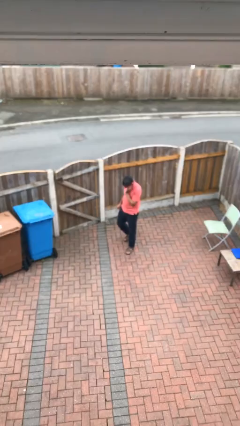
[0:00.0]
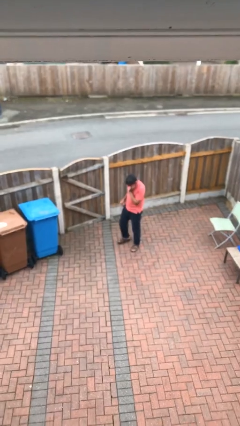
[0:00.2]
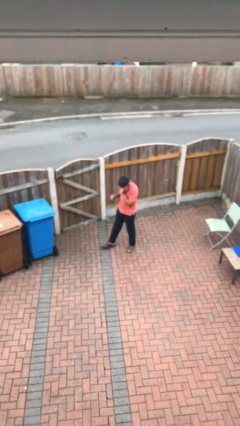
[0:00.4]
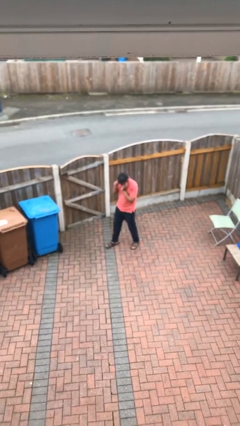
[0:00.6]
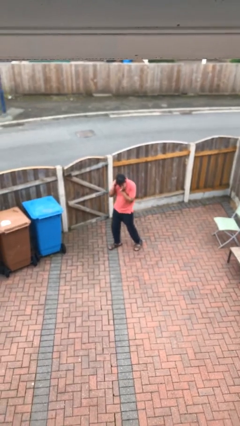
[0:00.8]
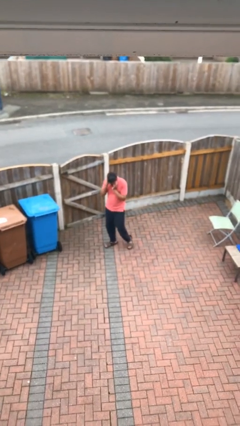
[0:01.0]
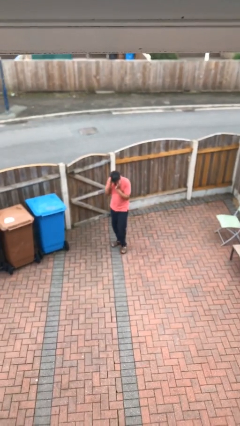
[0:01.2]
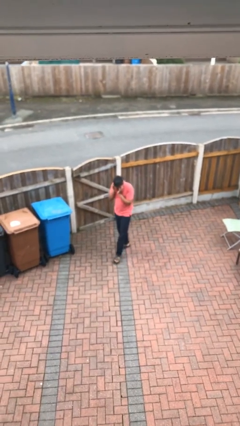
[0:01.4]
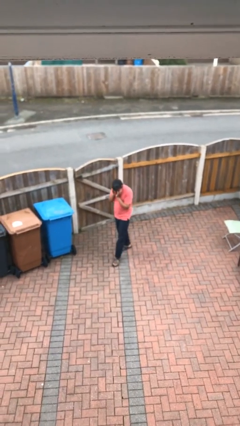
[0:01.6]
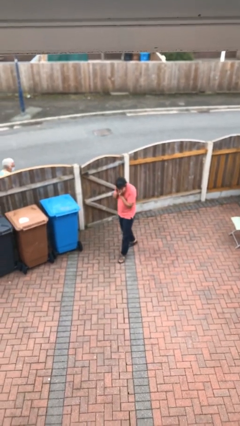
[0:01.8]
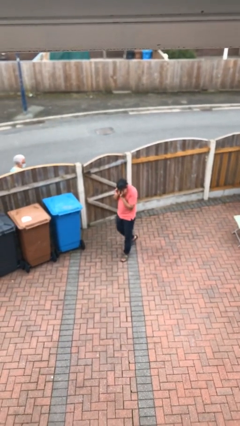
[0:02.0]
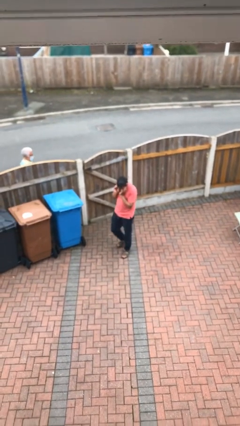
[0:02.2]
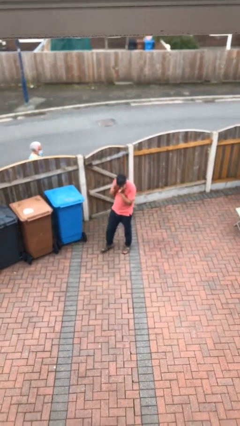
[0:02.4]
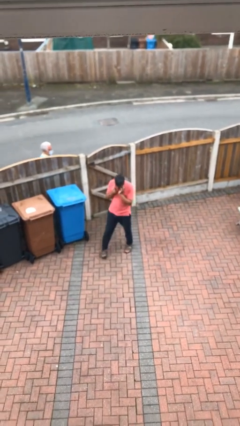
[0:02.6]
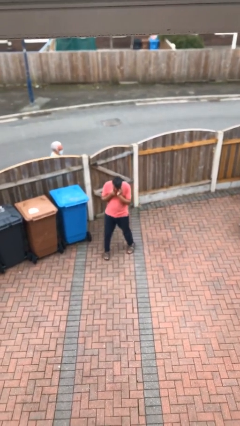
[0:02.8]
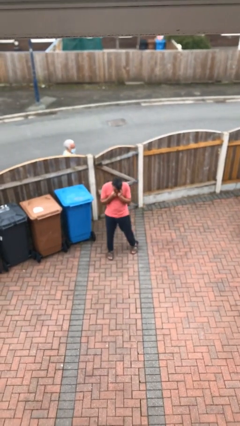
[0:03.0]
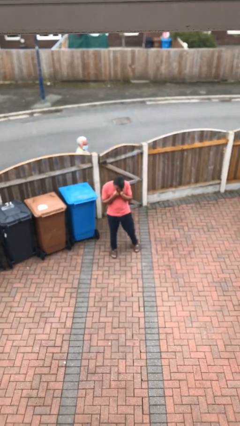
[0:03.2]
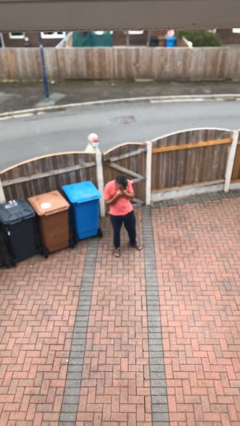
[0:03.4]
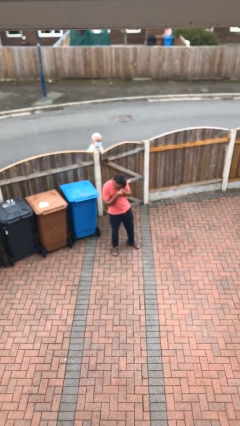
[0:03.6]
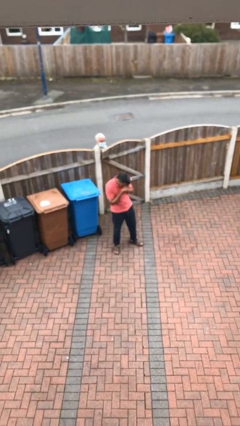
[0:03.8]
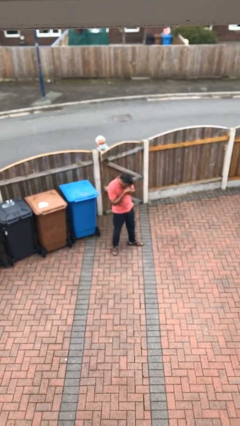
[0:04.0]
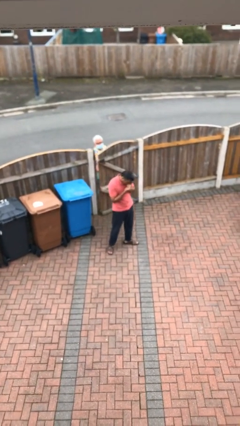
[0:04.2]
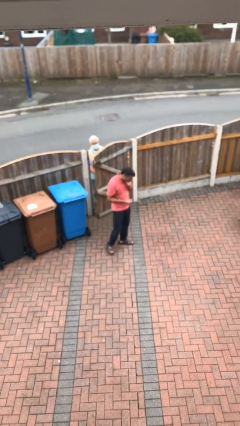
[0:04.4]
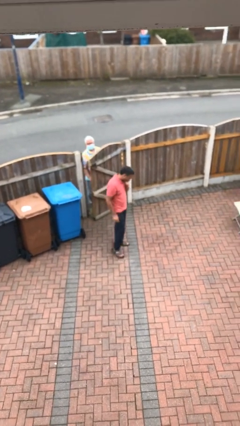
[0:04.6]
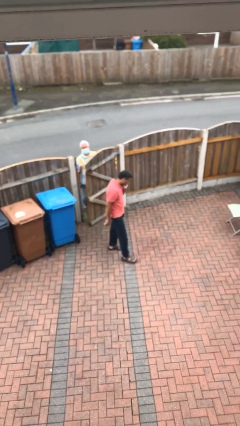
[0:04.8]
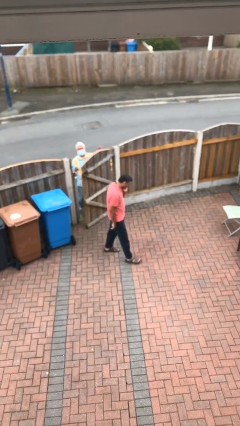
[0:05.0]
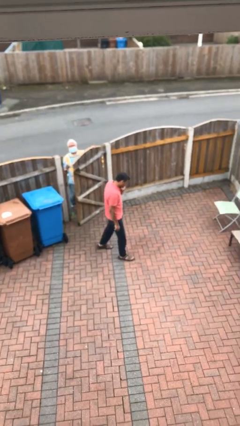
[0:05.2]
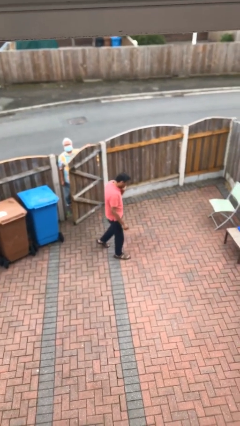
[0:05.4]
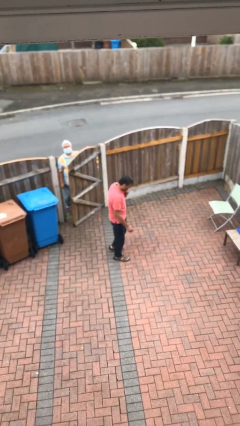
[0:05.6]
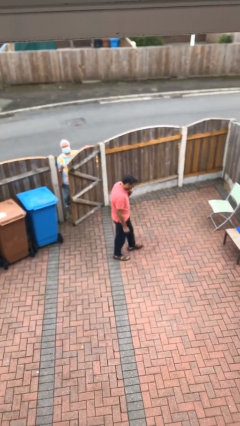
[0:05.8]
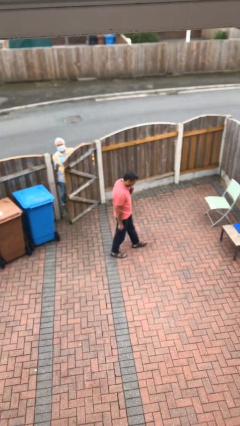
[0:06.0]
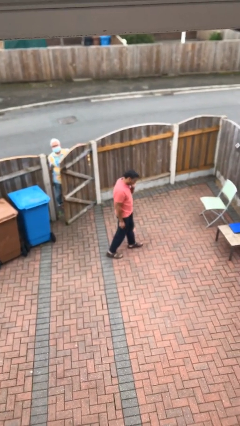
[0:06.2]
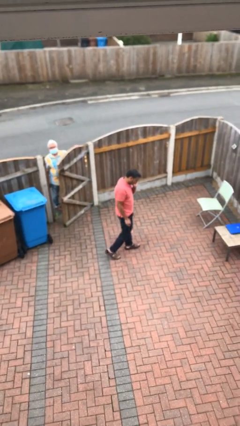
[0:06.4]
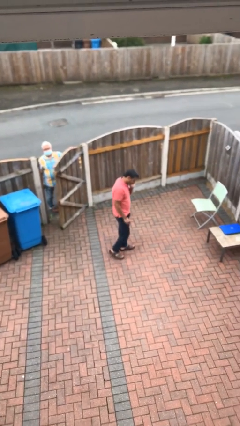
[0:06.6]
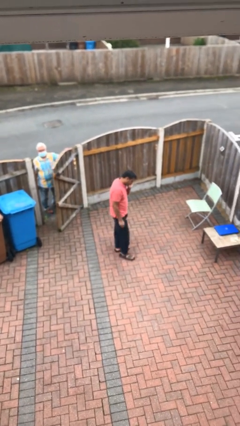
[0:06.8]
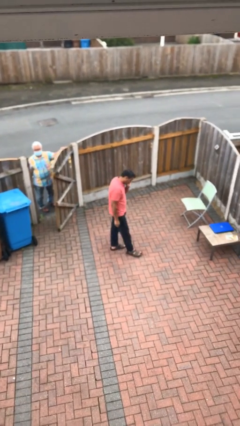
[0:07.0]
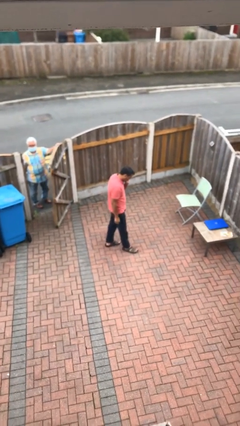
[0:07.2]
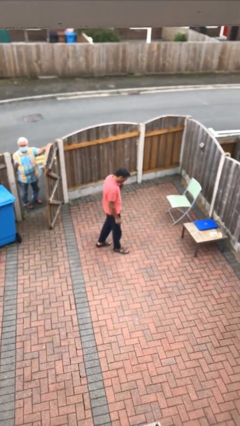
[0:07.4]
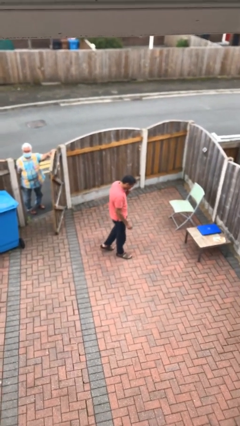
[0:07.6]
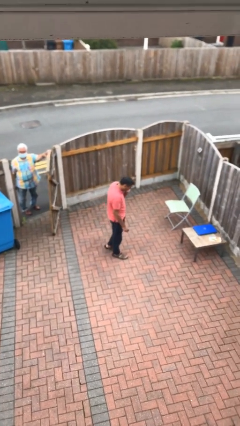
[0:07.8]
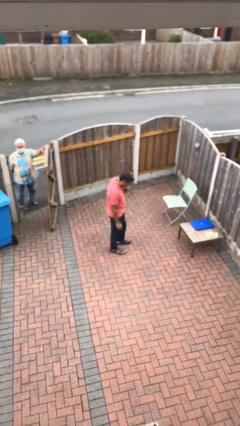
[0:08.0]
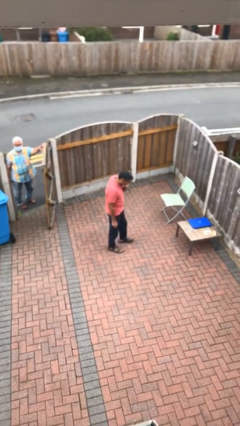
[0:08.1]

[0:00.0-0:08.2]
person talks on phone

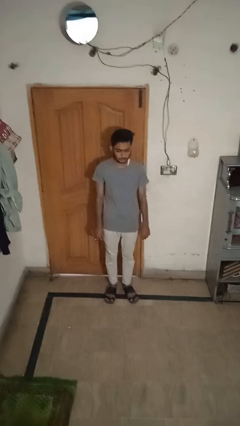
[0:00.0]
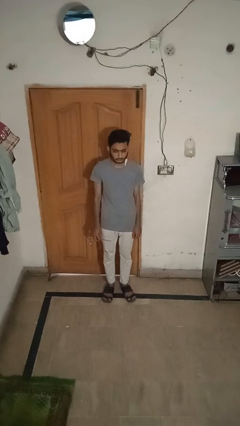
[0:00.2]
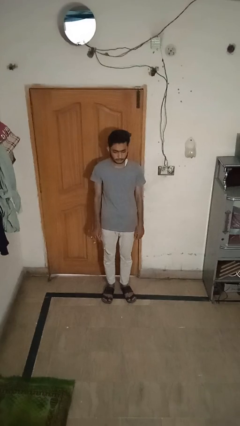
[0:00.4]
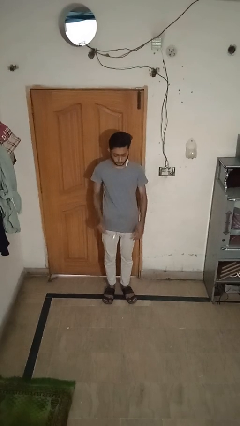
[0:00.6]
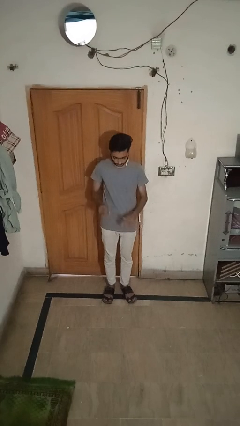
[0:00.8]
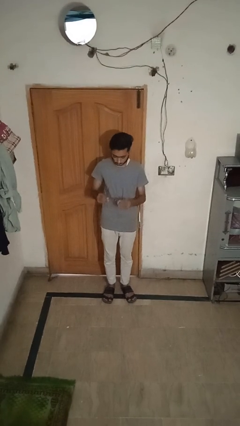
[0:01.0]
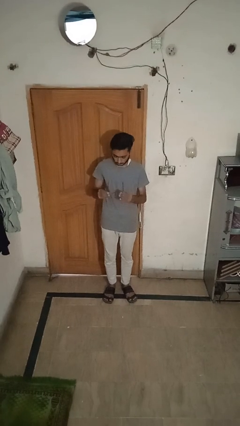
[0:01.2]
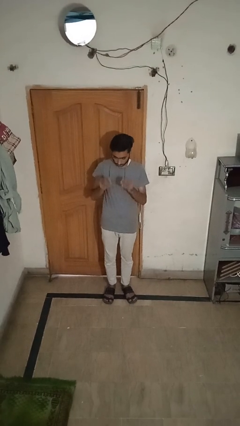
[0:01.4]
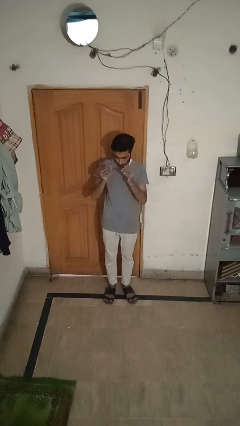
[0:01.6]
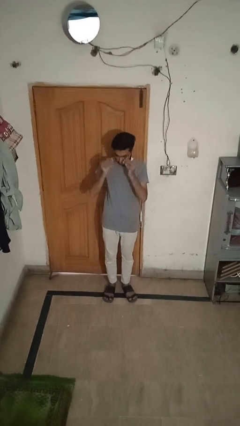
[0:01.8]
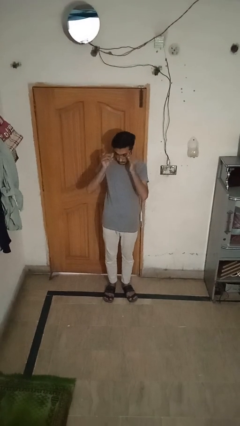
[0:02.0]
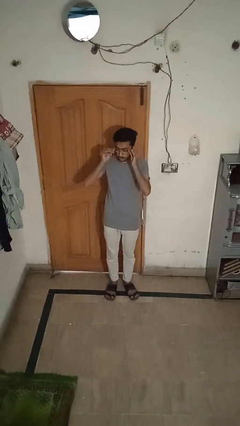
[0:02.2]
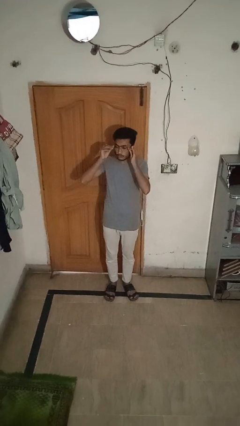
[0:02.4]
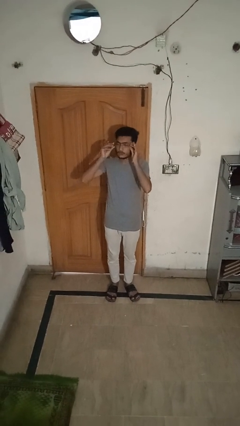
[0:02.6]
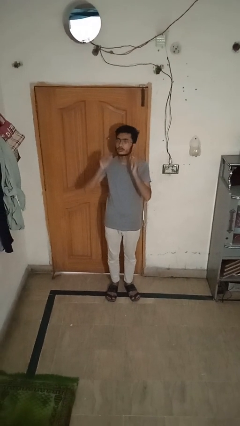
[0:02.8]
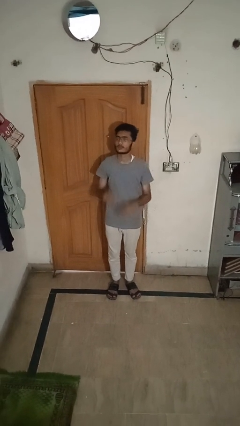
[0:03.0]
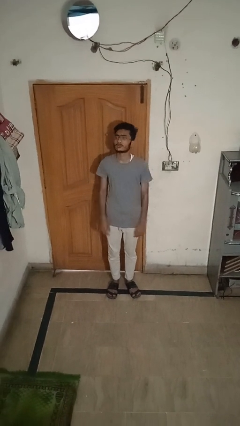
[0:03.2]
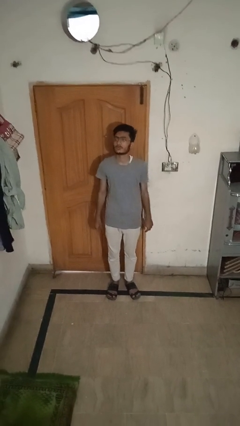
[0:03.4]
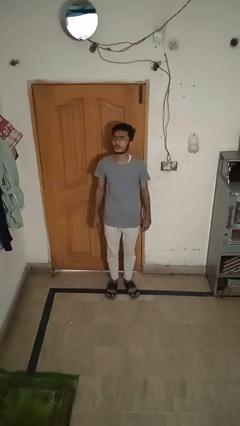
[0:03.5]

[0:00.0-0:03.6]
person puts on glasses

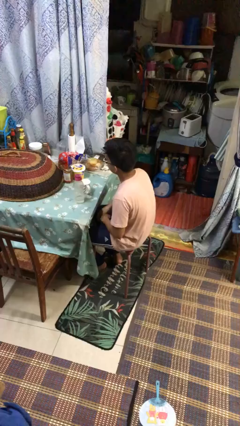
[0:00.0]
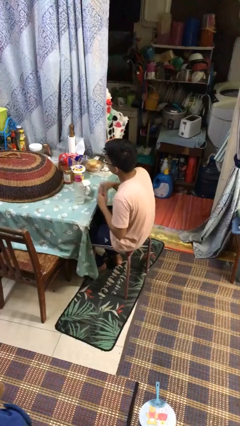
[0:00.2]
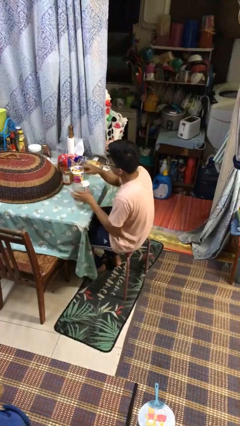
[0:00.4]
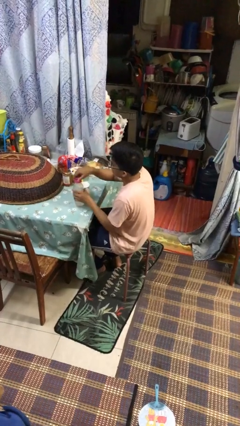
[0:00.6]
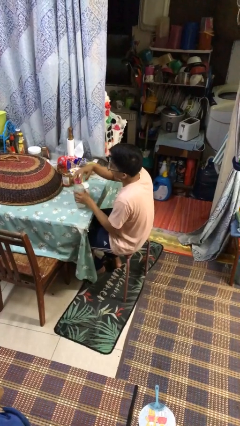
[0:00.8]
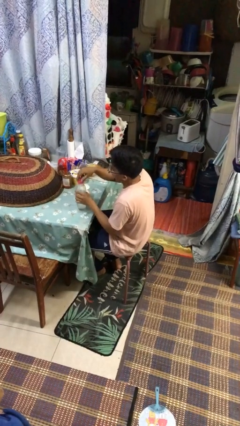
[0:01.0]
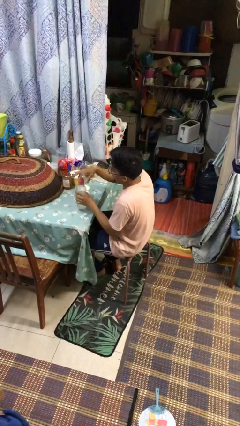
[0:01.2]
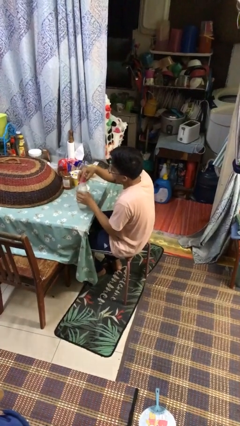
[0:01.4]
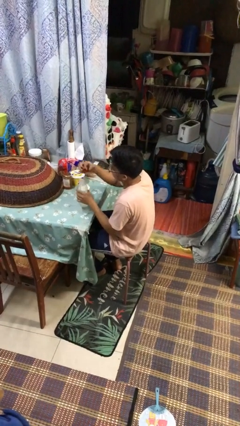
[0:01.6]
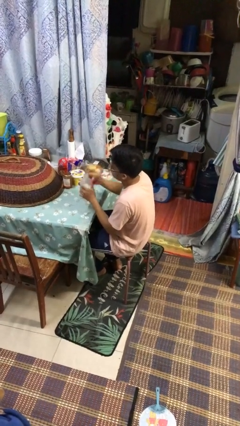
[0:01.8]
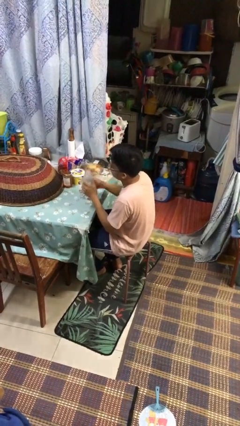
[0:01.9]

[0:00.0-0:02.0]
person unscrews lid from bottle

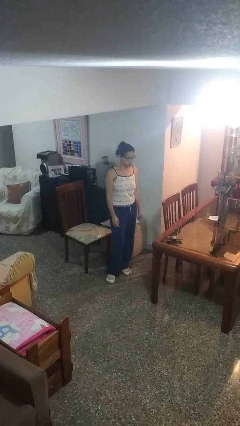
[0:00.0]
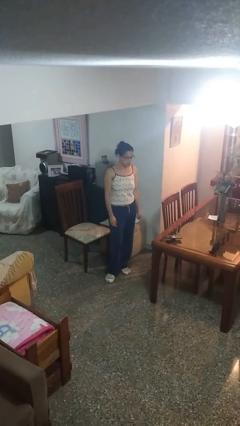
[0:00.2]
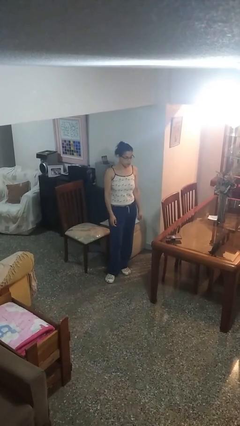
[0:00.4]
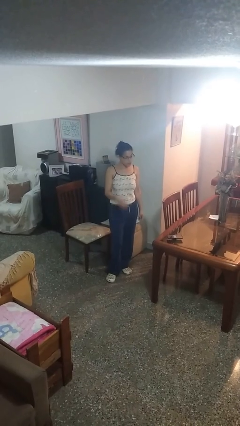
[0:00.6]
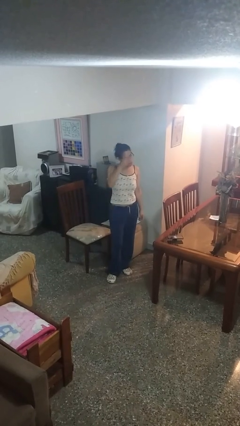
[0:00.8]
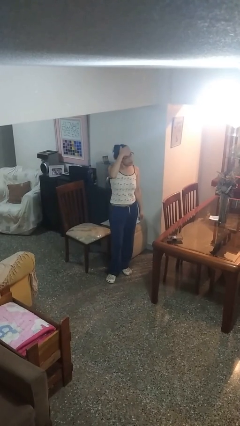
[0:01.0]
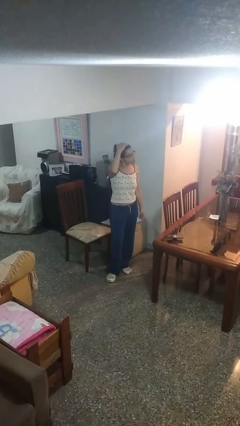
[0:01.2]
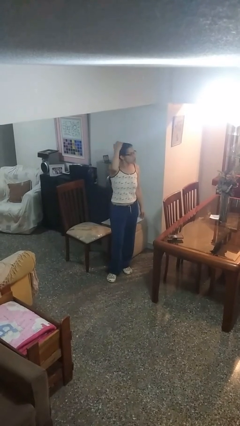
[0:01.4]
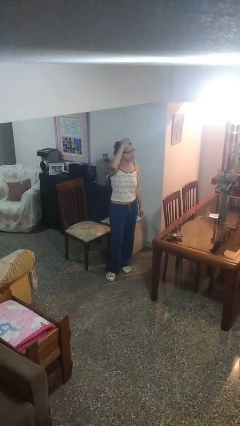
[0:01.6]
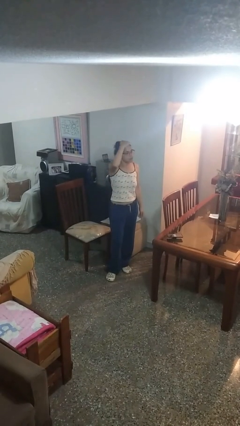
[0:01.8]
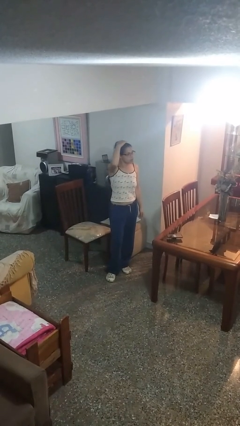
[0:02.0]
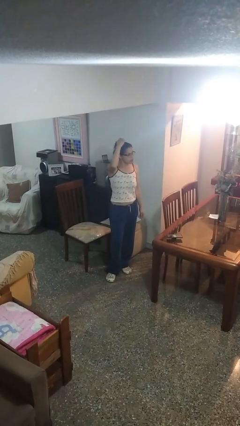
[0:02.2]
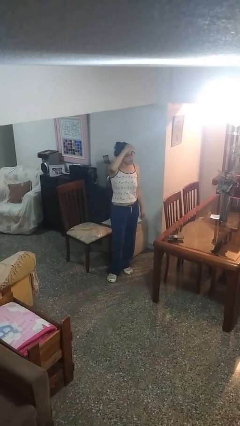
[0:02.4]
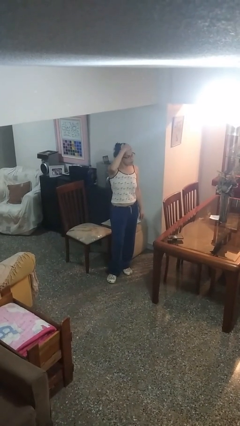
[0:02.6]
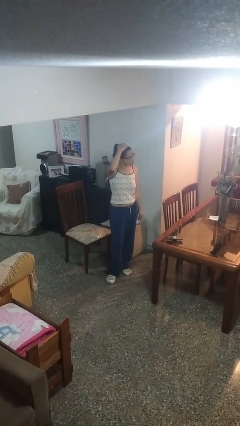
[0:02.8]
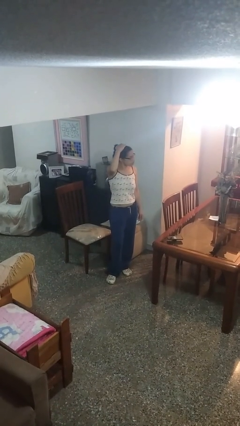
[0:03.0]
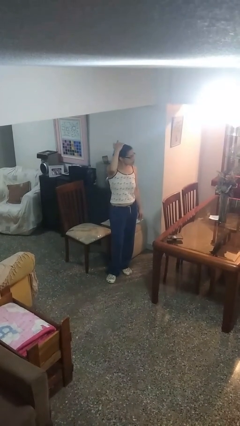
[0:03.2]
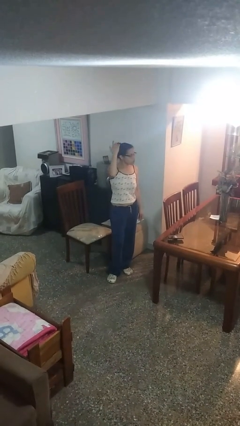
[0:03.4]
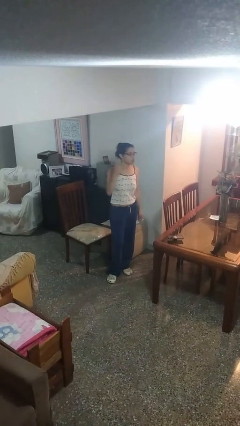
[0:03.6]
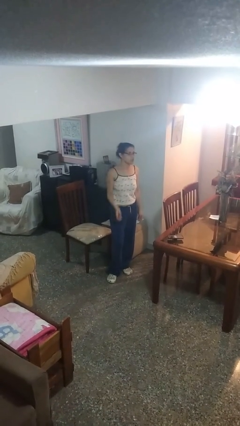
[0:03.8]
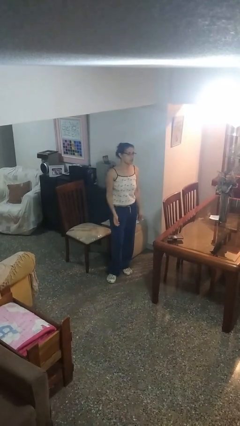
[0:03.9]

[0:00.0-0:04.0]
person pats head
